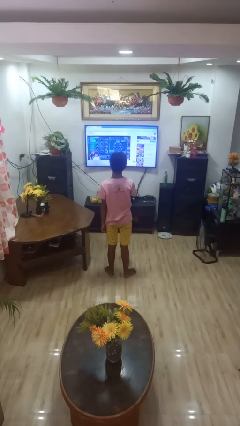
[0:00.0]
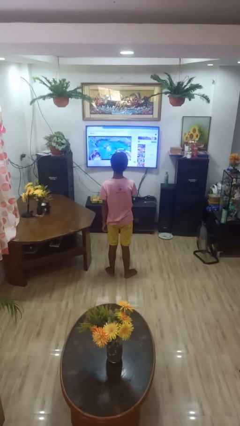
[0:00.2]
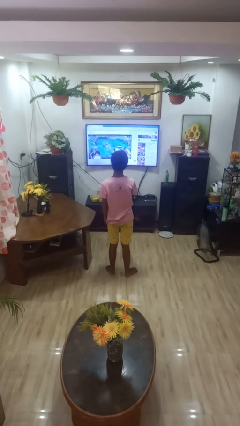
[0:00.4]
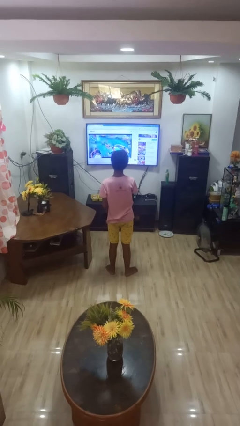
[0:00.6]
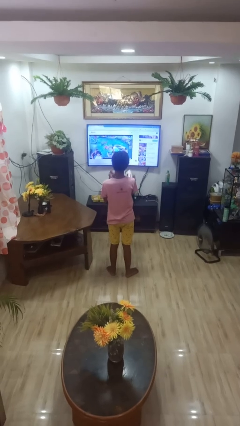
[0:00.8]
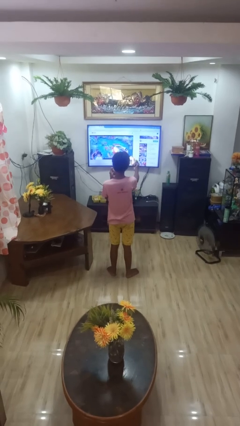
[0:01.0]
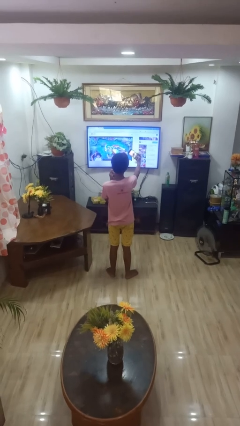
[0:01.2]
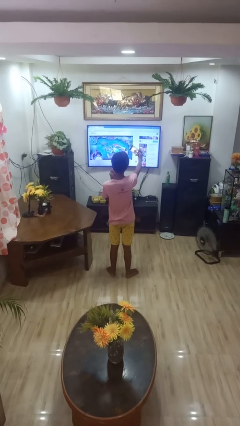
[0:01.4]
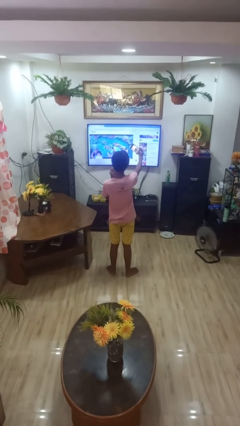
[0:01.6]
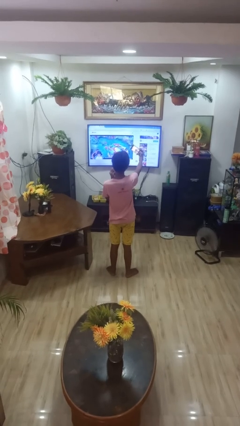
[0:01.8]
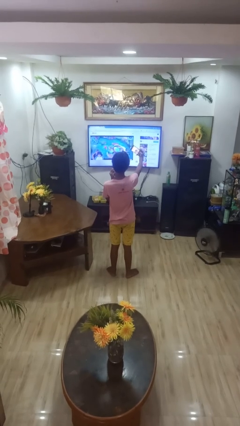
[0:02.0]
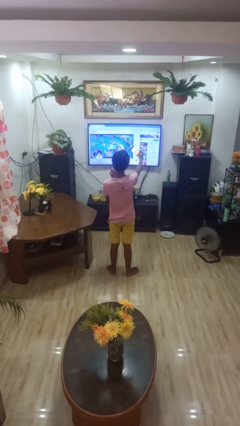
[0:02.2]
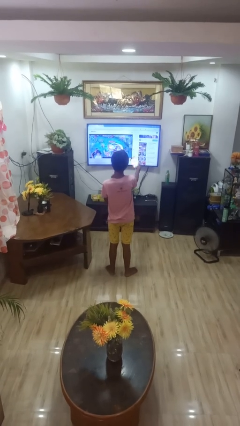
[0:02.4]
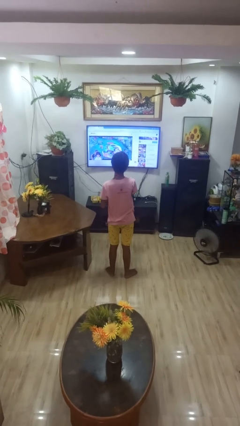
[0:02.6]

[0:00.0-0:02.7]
person takes selfie

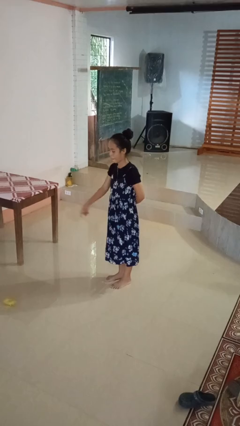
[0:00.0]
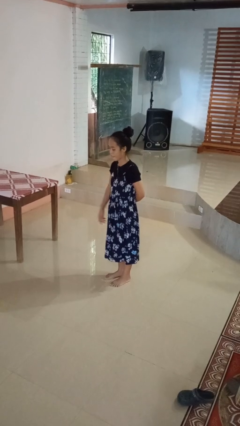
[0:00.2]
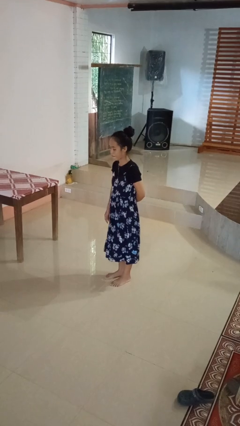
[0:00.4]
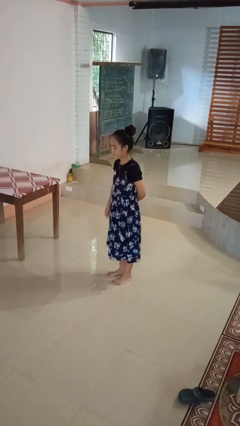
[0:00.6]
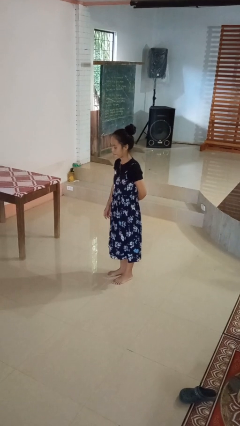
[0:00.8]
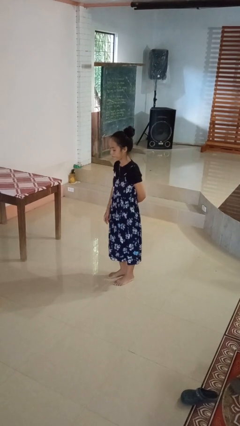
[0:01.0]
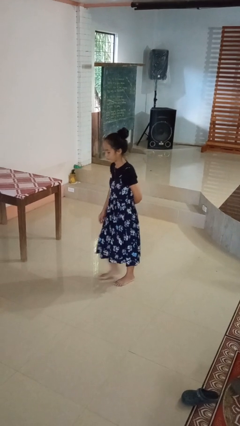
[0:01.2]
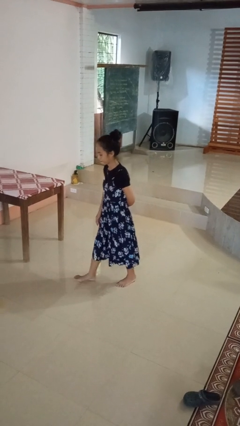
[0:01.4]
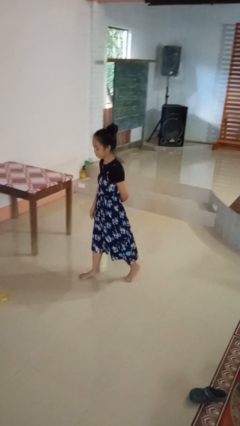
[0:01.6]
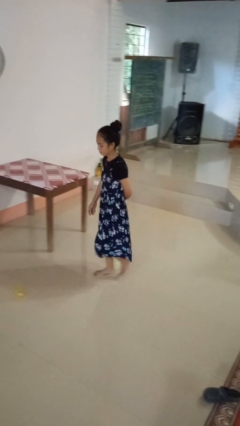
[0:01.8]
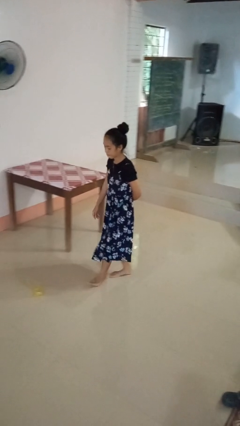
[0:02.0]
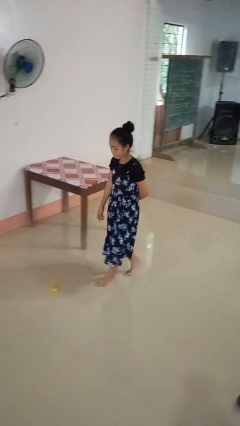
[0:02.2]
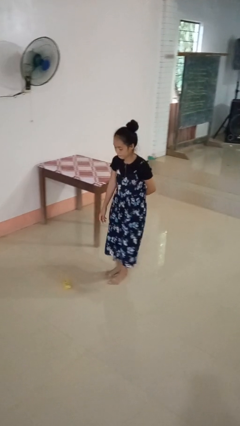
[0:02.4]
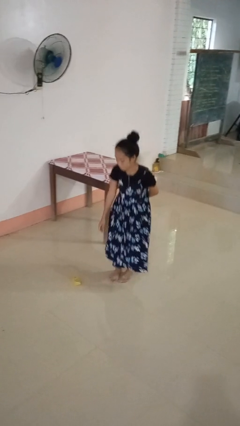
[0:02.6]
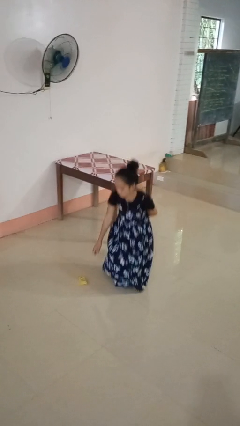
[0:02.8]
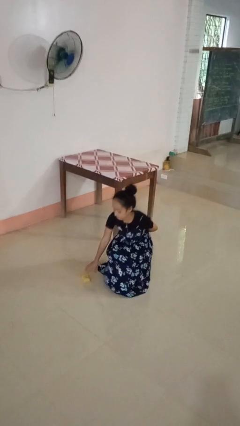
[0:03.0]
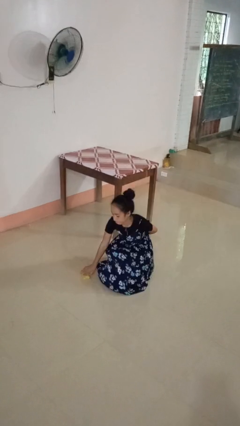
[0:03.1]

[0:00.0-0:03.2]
person throws object to ground

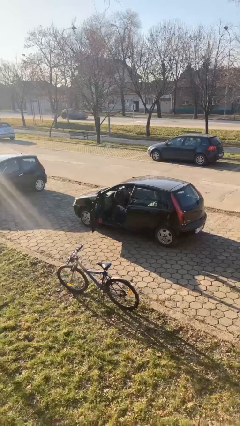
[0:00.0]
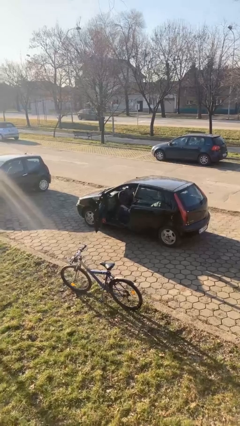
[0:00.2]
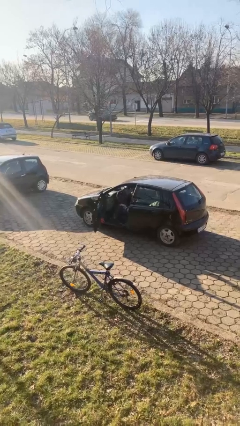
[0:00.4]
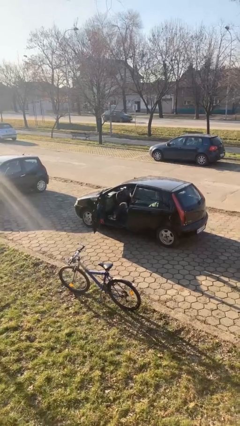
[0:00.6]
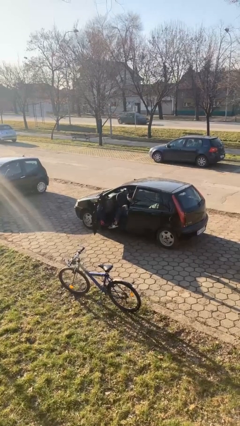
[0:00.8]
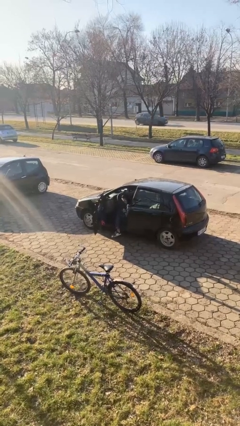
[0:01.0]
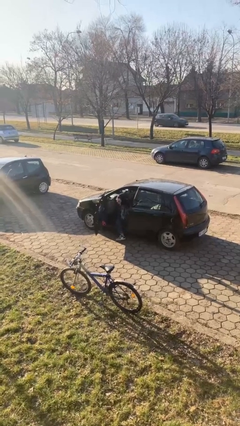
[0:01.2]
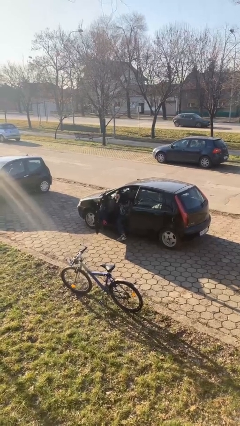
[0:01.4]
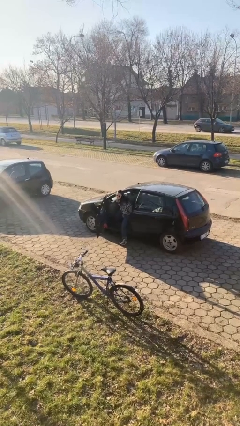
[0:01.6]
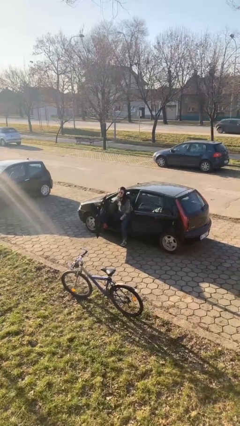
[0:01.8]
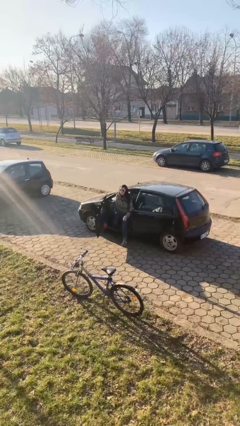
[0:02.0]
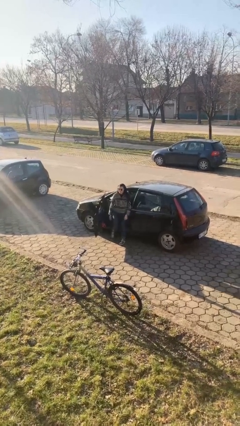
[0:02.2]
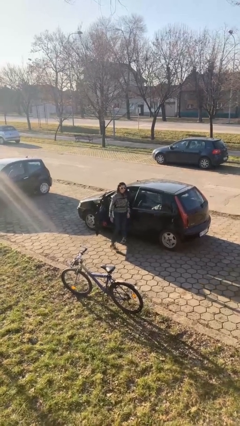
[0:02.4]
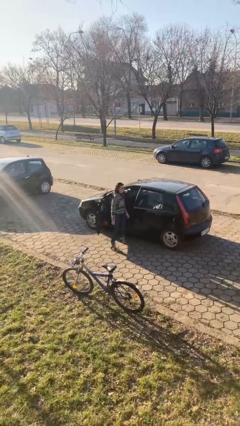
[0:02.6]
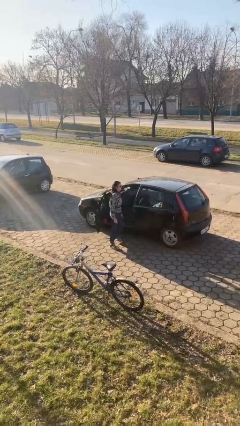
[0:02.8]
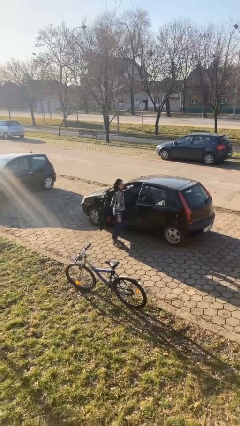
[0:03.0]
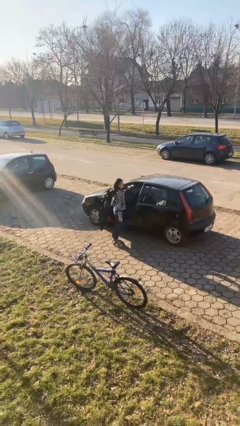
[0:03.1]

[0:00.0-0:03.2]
person exits car

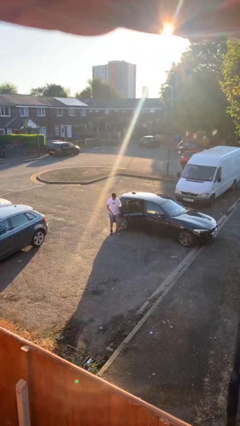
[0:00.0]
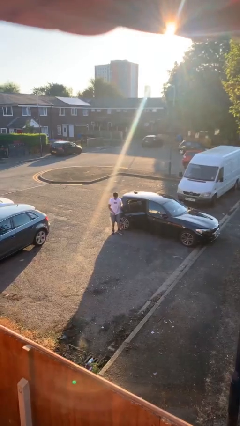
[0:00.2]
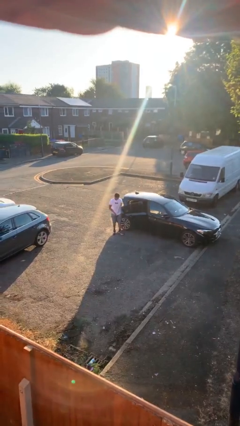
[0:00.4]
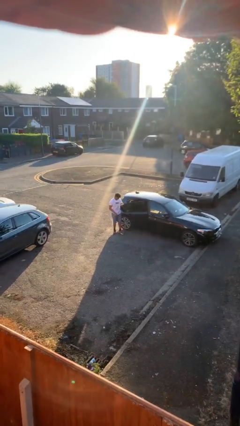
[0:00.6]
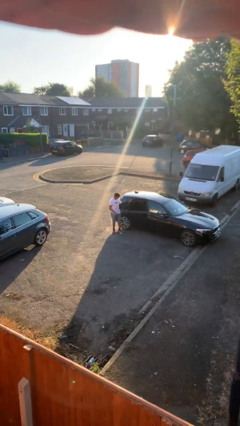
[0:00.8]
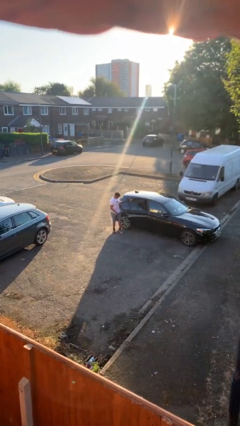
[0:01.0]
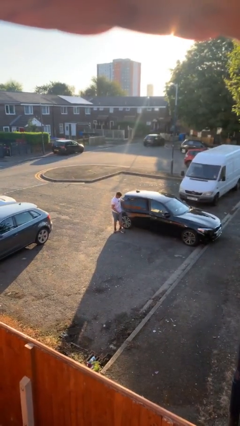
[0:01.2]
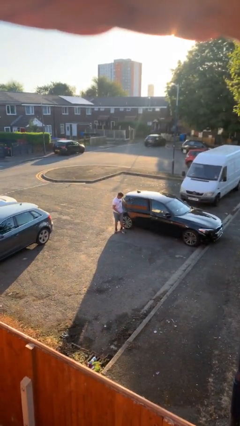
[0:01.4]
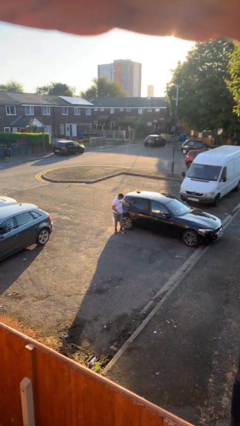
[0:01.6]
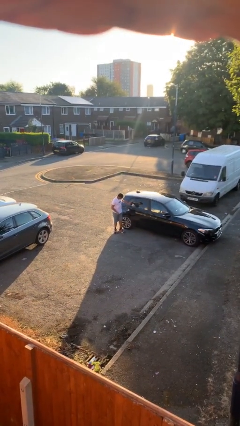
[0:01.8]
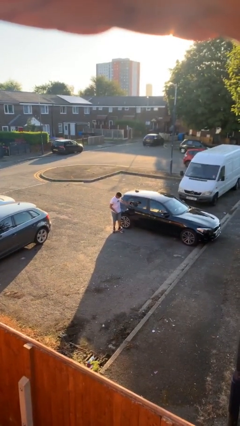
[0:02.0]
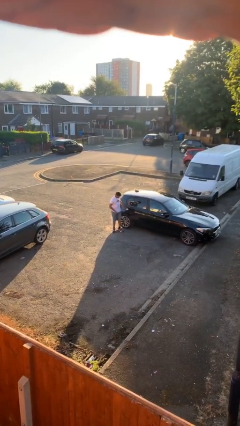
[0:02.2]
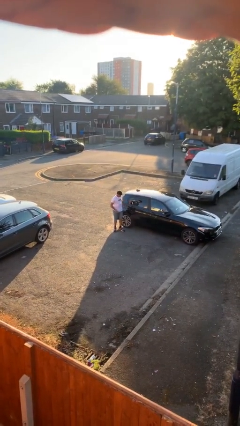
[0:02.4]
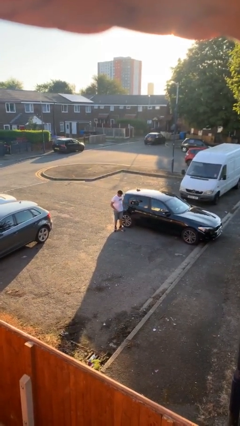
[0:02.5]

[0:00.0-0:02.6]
person closes car door

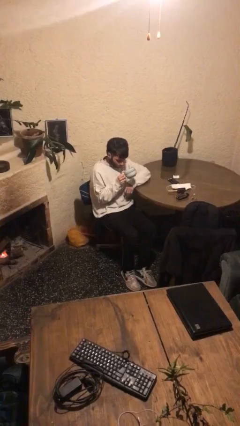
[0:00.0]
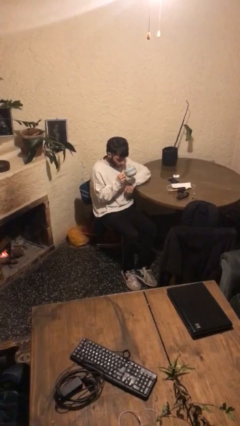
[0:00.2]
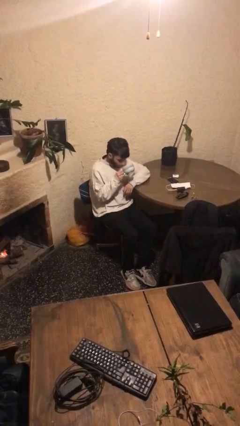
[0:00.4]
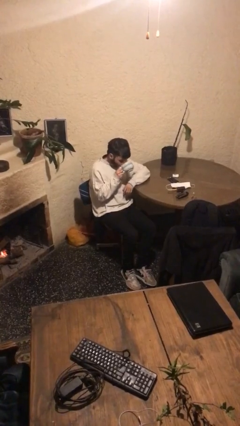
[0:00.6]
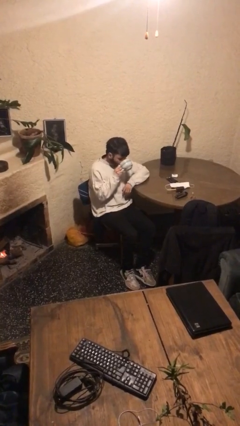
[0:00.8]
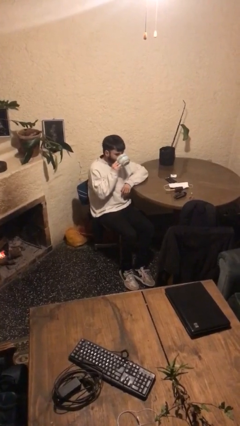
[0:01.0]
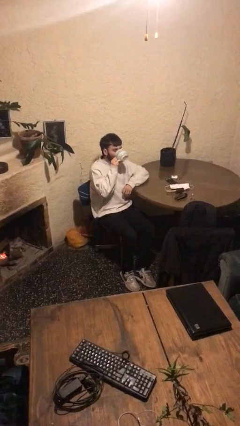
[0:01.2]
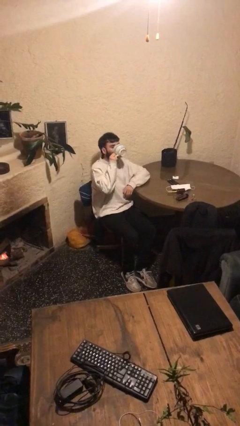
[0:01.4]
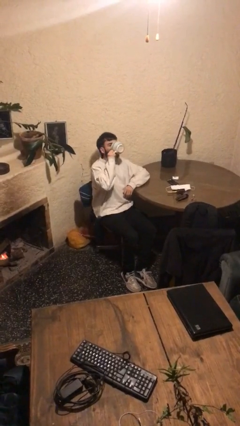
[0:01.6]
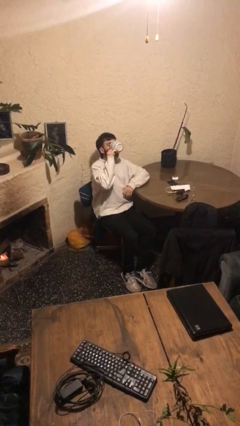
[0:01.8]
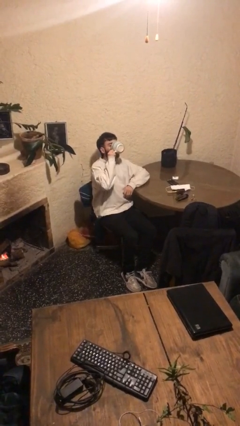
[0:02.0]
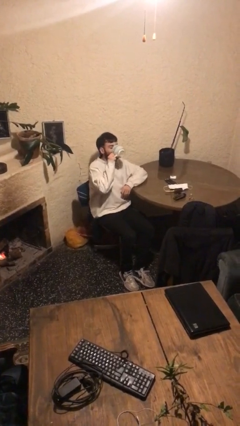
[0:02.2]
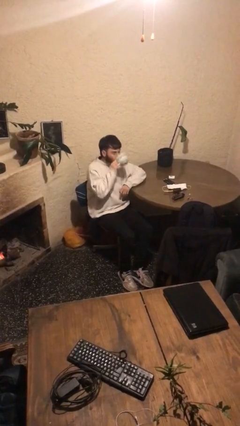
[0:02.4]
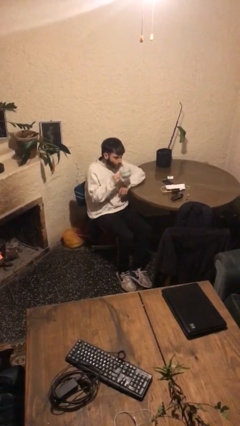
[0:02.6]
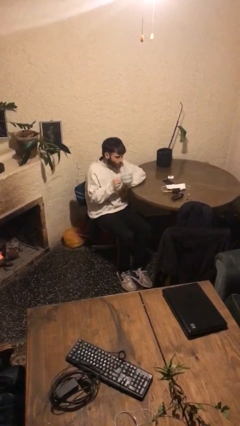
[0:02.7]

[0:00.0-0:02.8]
person drinks from mug

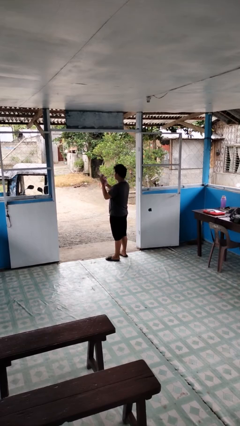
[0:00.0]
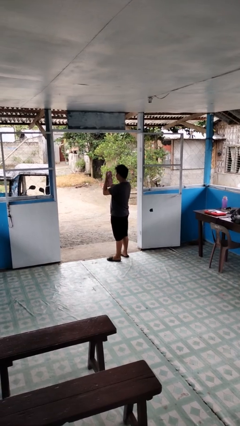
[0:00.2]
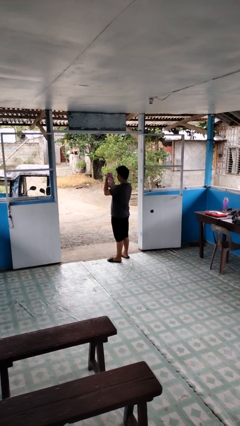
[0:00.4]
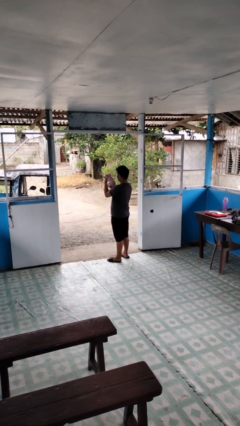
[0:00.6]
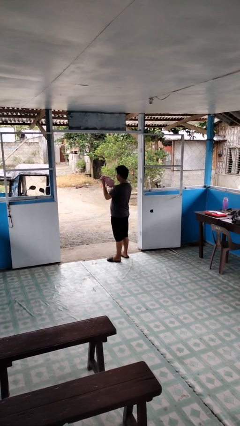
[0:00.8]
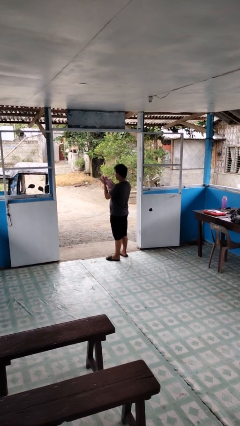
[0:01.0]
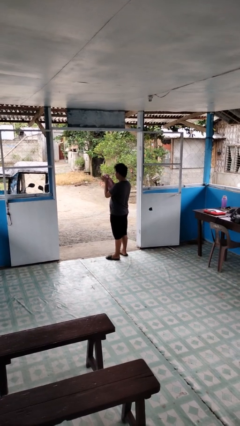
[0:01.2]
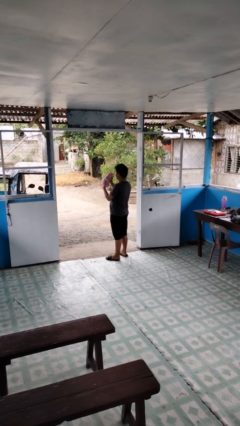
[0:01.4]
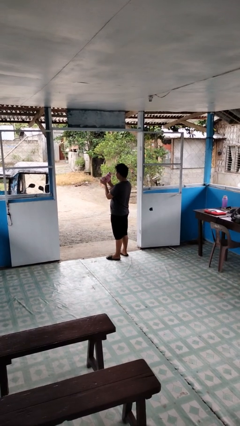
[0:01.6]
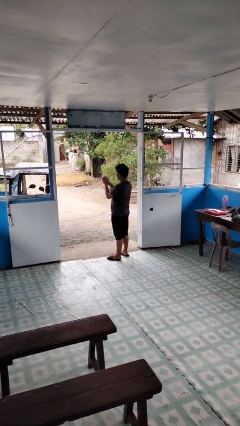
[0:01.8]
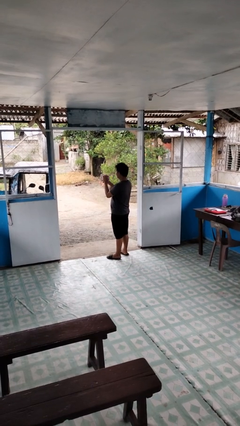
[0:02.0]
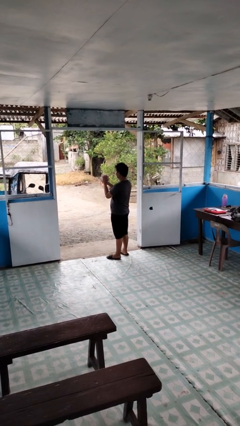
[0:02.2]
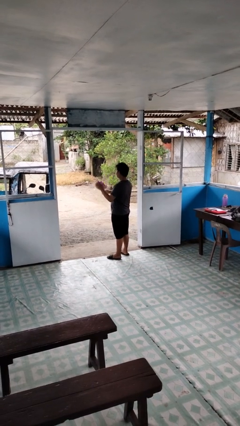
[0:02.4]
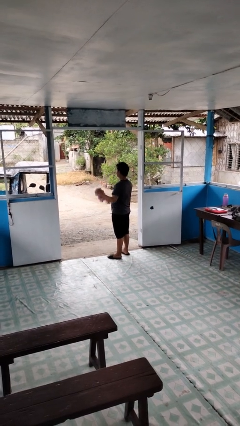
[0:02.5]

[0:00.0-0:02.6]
person squeezes object

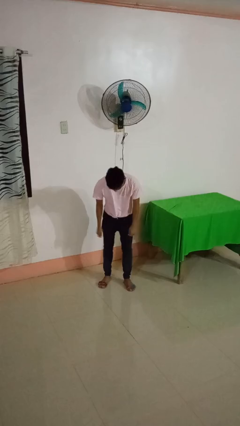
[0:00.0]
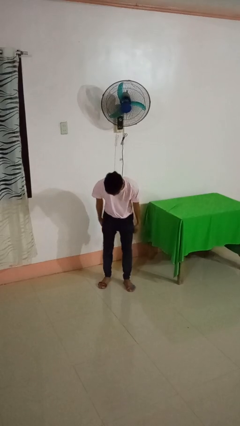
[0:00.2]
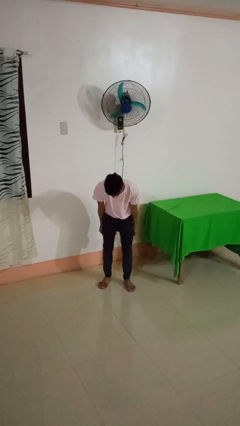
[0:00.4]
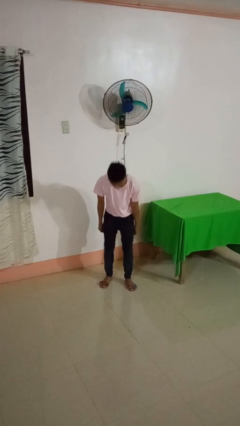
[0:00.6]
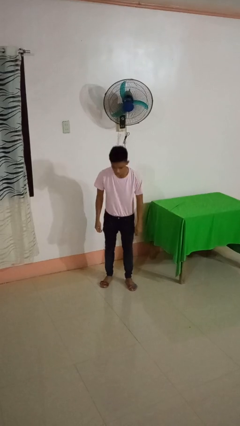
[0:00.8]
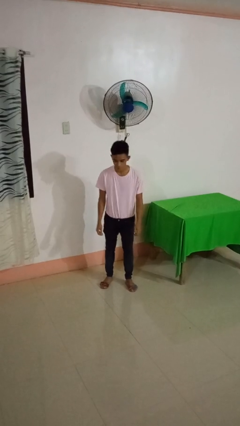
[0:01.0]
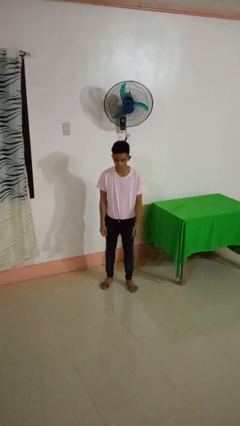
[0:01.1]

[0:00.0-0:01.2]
person hikes up pants
